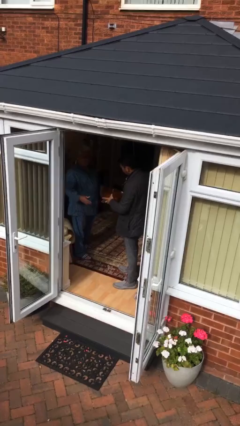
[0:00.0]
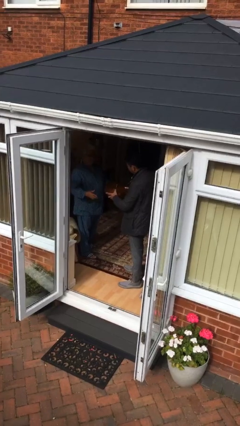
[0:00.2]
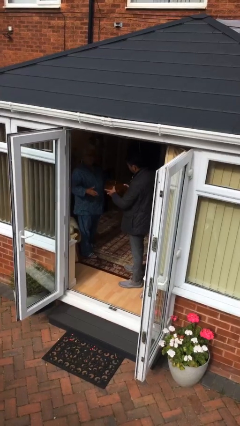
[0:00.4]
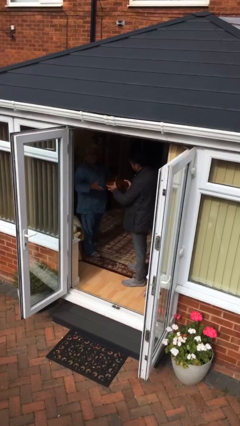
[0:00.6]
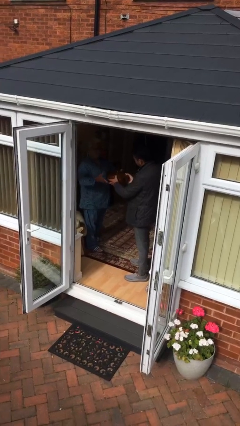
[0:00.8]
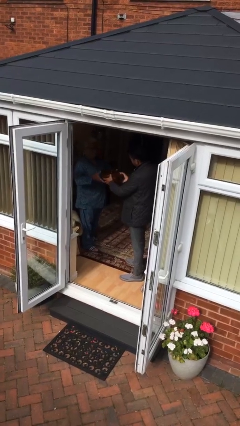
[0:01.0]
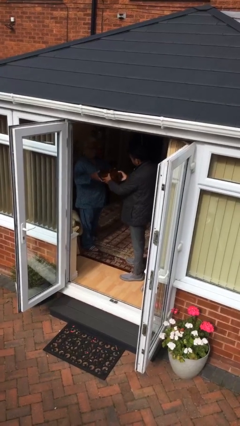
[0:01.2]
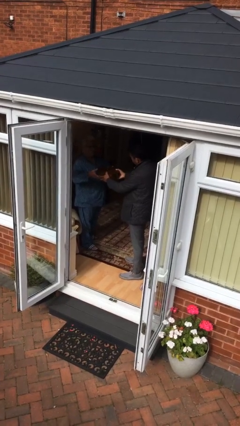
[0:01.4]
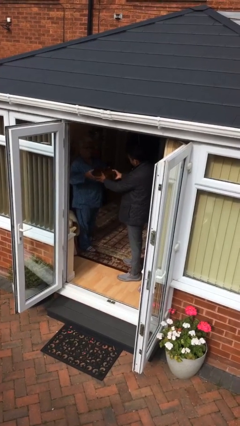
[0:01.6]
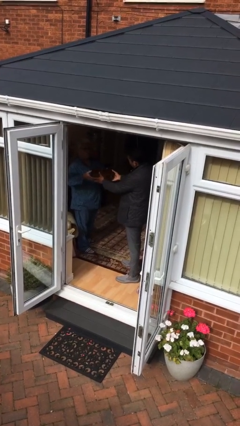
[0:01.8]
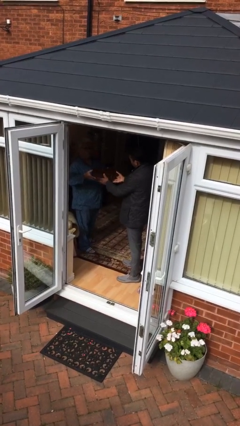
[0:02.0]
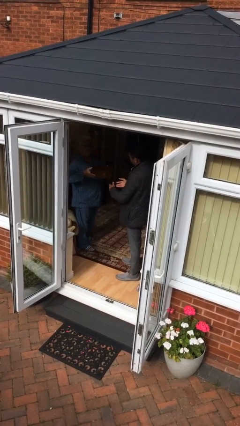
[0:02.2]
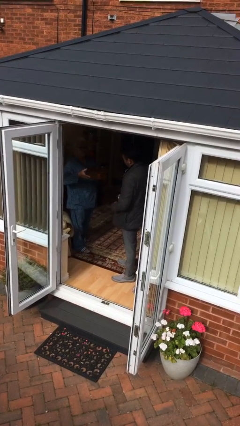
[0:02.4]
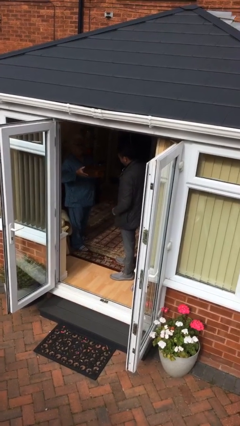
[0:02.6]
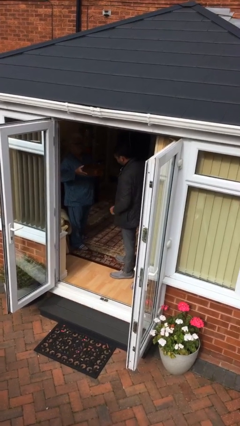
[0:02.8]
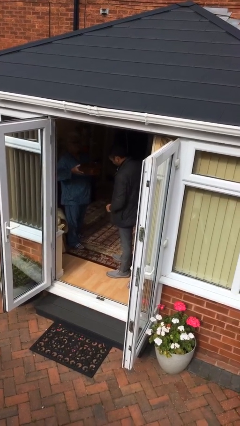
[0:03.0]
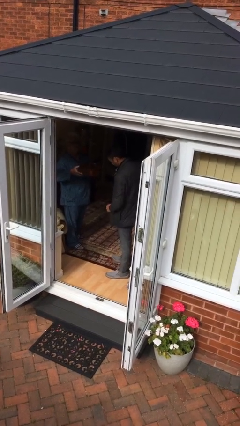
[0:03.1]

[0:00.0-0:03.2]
person transfers object to person

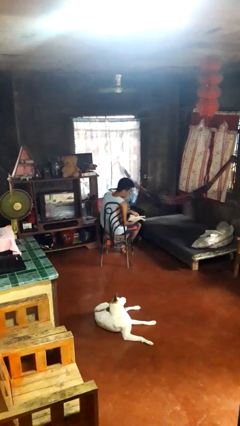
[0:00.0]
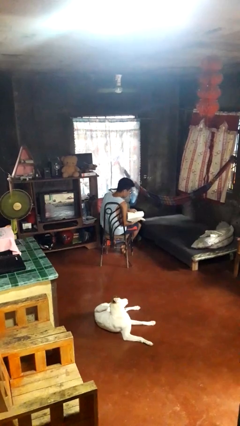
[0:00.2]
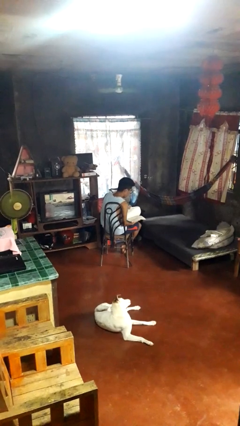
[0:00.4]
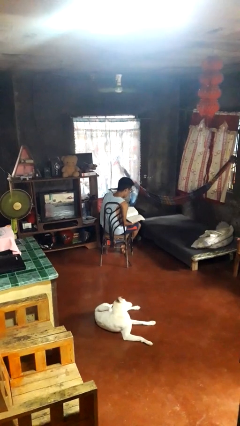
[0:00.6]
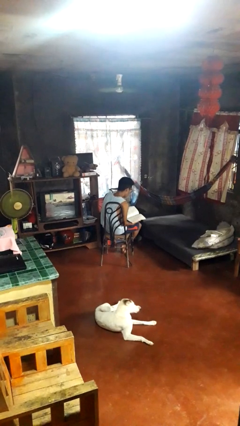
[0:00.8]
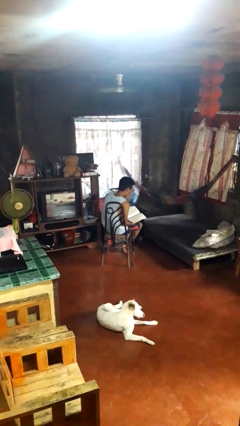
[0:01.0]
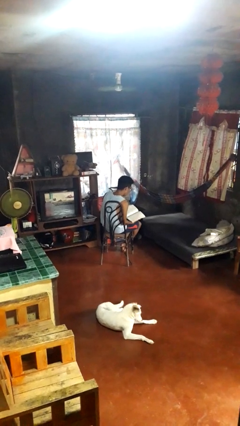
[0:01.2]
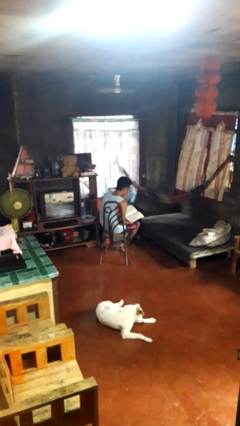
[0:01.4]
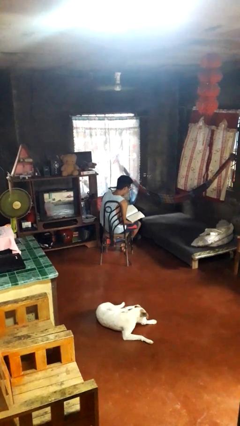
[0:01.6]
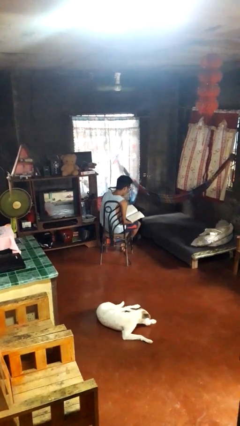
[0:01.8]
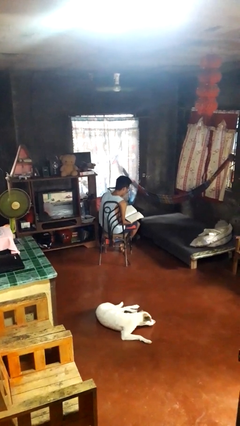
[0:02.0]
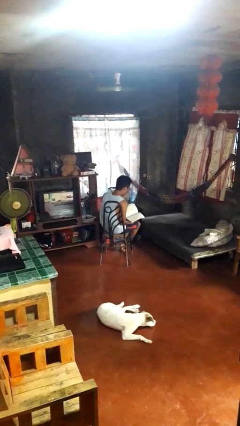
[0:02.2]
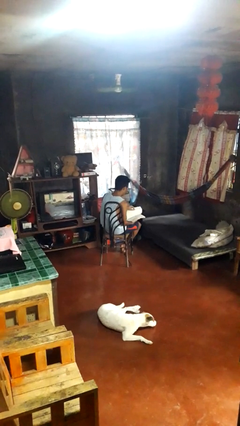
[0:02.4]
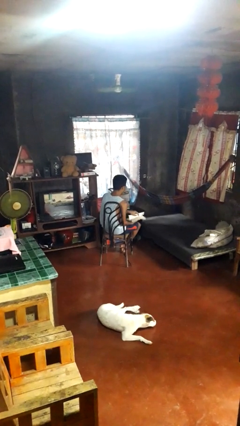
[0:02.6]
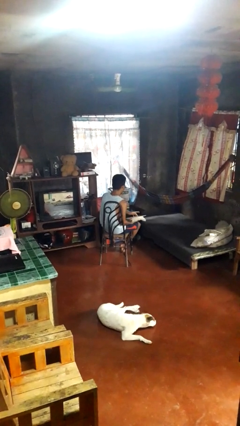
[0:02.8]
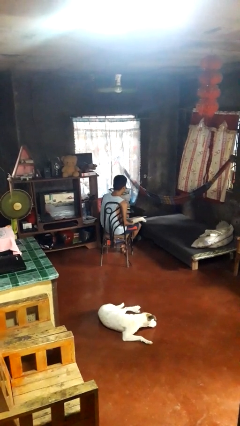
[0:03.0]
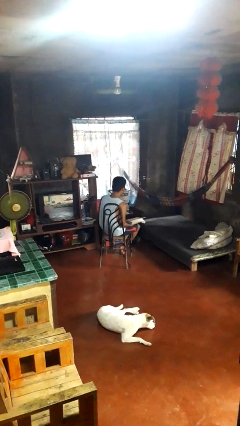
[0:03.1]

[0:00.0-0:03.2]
person reads book

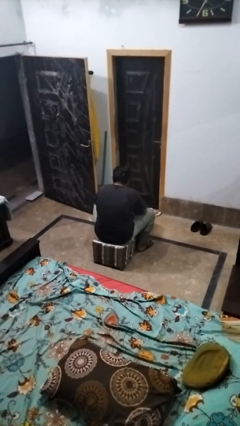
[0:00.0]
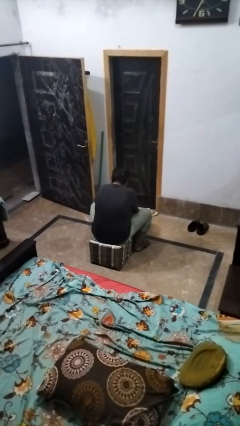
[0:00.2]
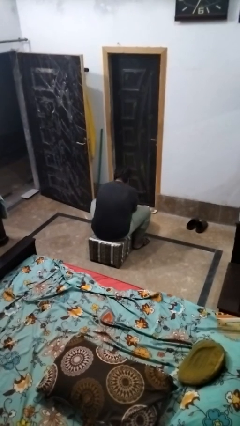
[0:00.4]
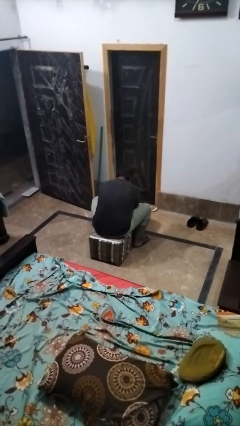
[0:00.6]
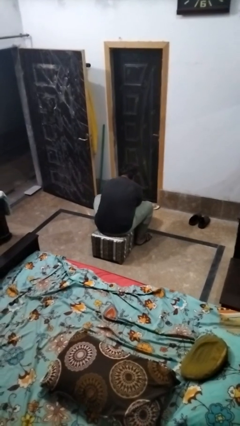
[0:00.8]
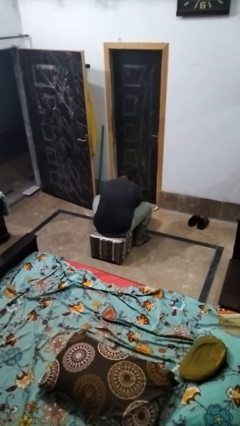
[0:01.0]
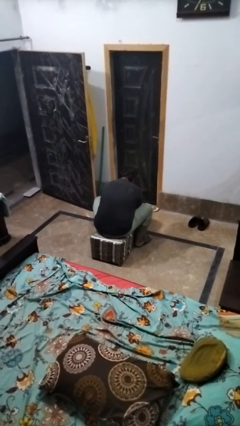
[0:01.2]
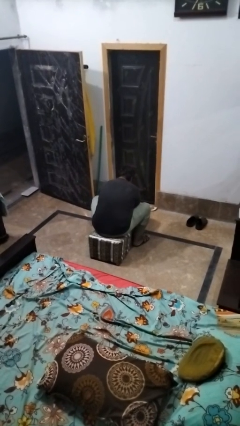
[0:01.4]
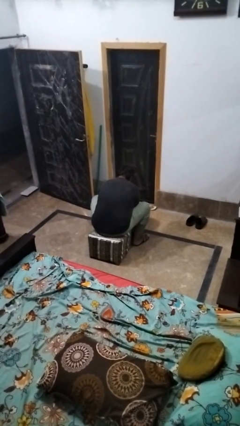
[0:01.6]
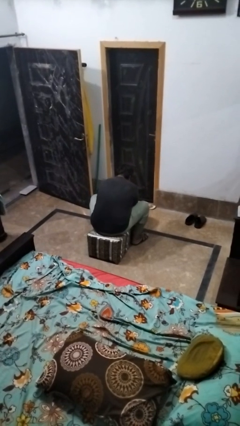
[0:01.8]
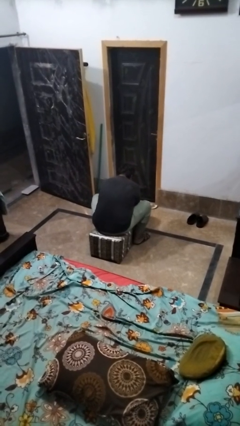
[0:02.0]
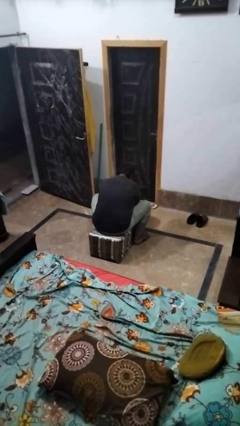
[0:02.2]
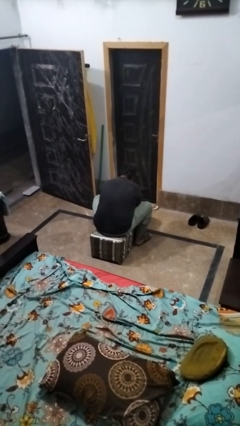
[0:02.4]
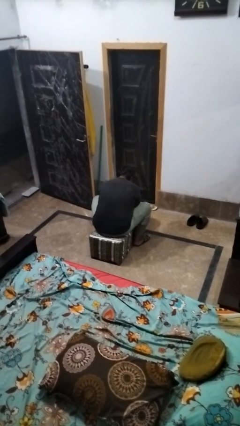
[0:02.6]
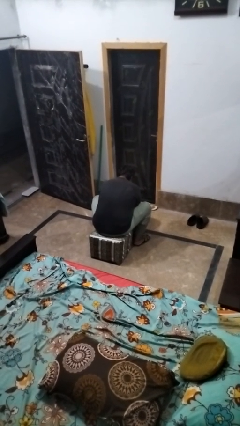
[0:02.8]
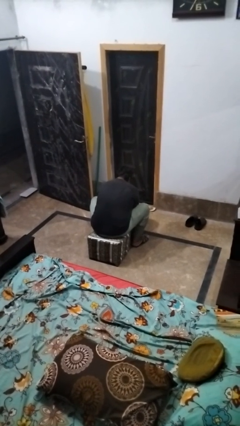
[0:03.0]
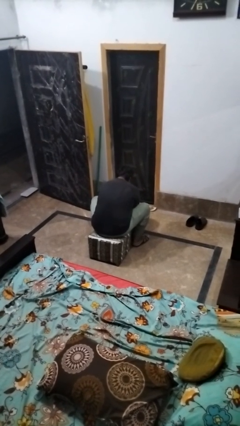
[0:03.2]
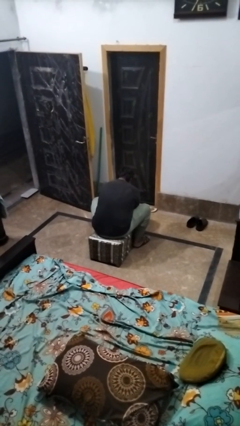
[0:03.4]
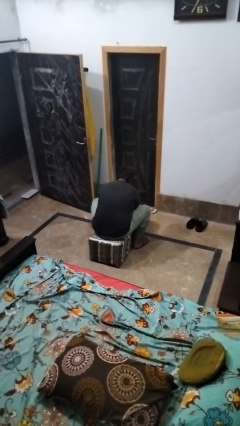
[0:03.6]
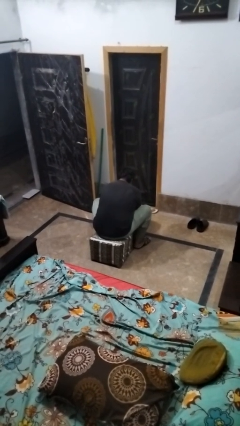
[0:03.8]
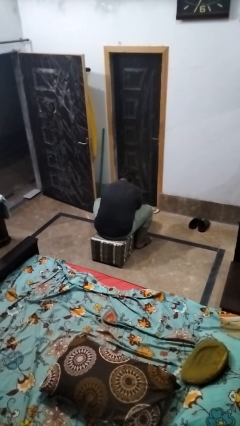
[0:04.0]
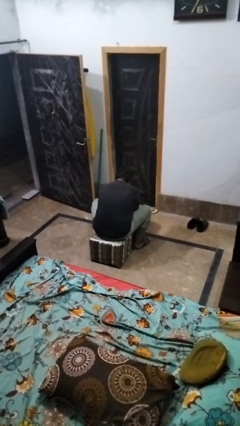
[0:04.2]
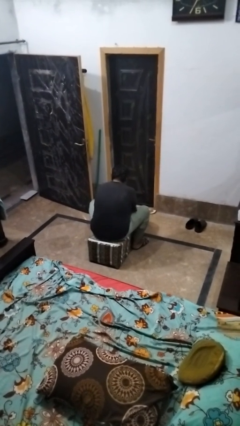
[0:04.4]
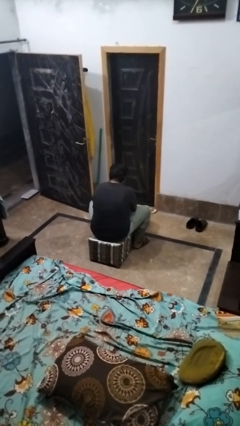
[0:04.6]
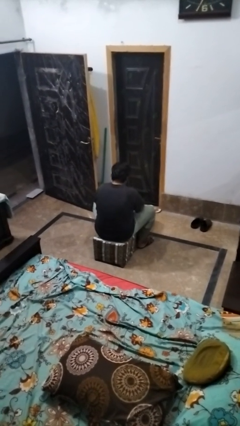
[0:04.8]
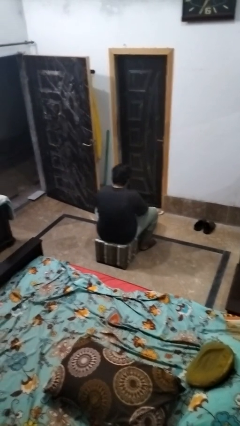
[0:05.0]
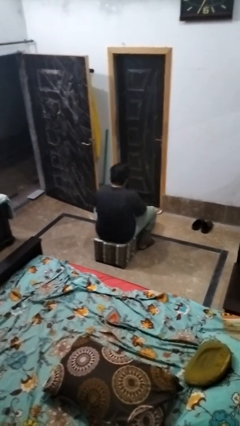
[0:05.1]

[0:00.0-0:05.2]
person searches in box

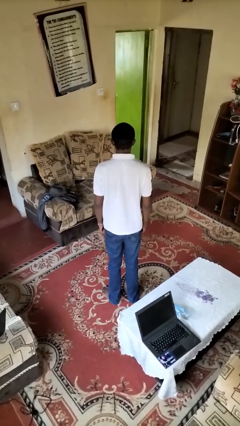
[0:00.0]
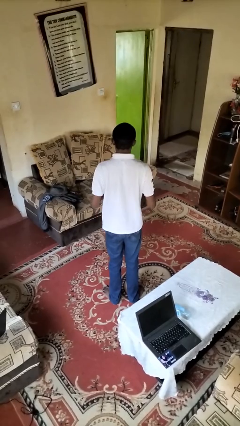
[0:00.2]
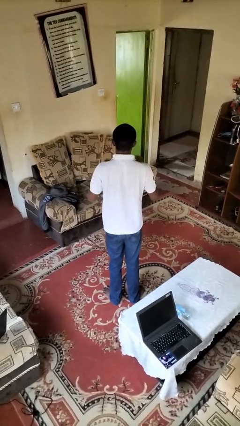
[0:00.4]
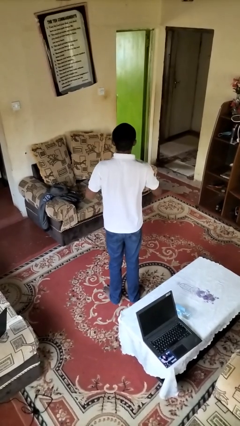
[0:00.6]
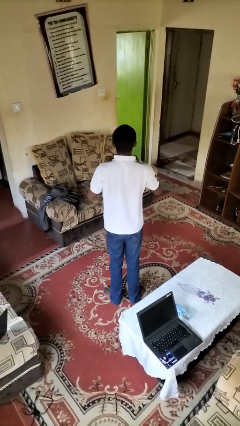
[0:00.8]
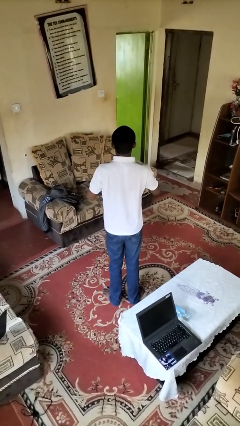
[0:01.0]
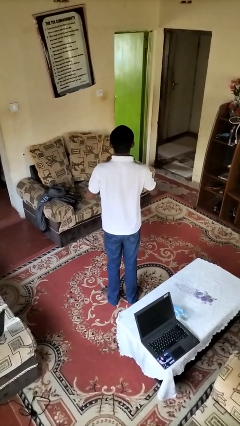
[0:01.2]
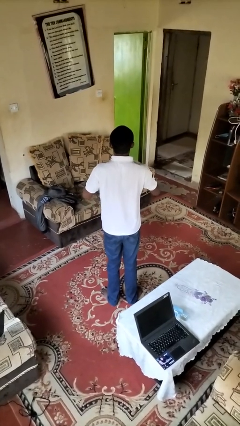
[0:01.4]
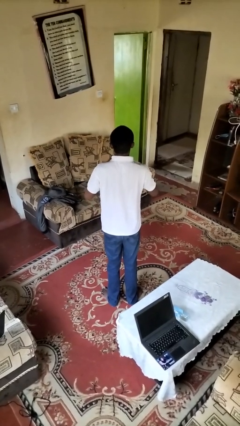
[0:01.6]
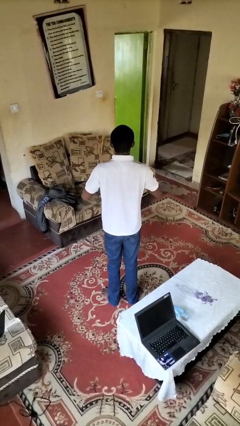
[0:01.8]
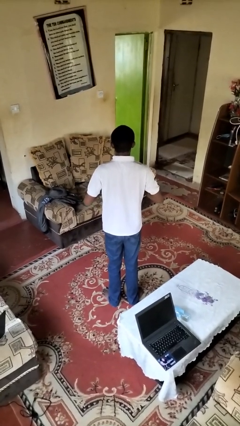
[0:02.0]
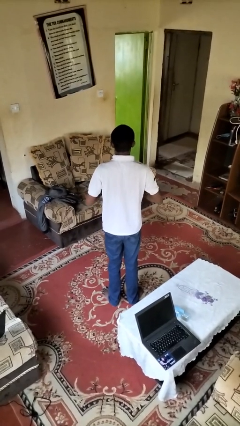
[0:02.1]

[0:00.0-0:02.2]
person drums on chest

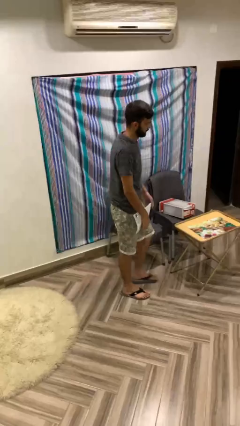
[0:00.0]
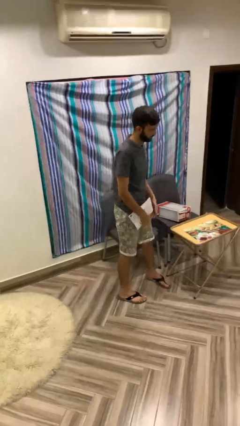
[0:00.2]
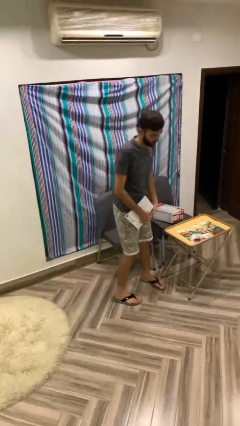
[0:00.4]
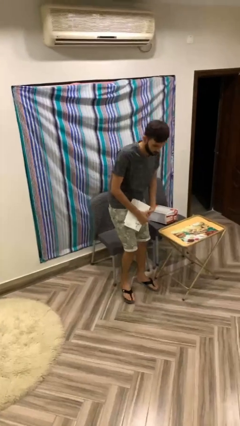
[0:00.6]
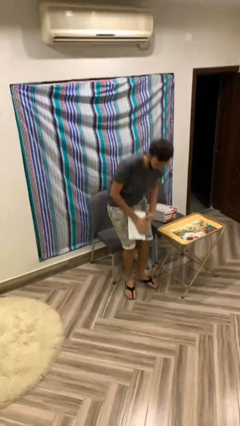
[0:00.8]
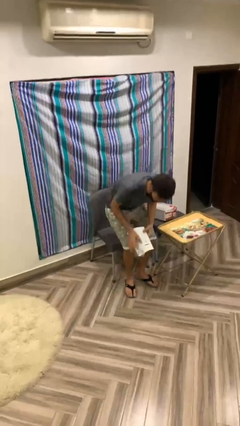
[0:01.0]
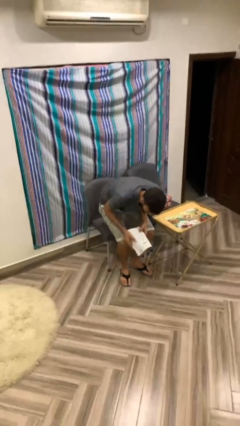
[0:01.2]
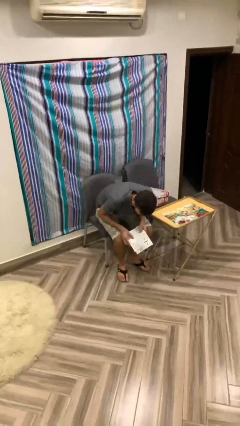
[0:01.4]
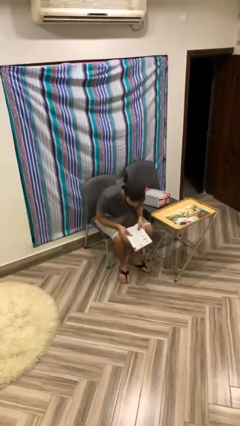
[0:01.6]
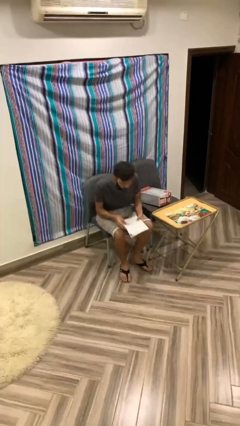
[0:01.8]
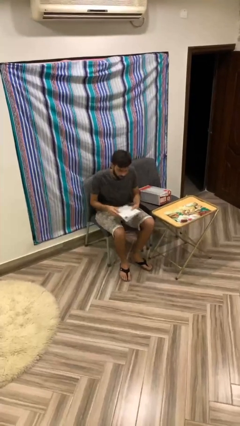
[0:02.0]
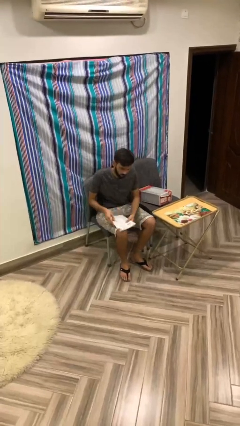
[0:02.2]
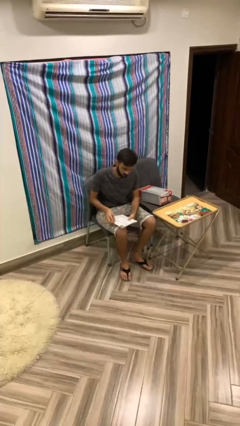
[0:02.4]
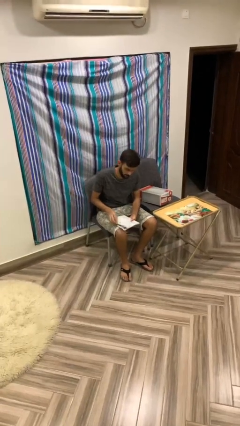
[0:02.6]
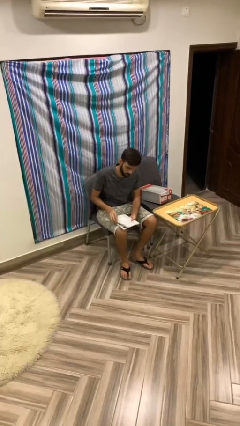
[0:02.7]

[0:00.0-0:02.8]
person sits down

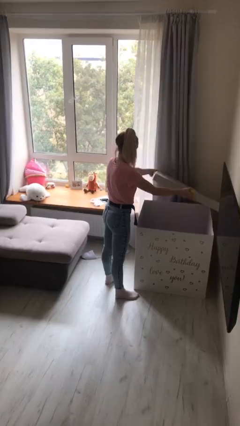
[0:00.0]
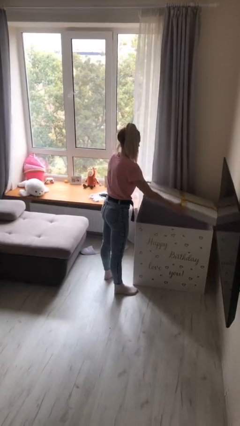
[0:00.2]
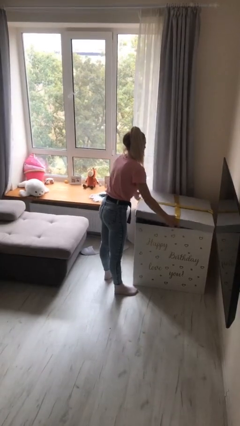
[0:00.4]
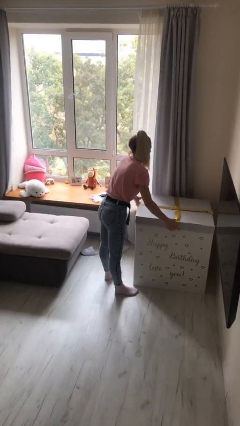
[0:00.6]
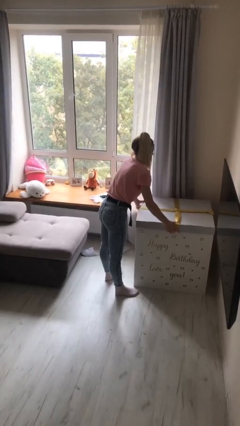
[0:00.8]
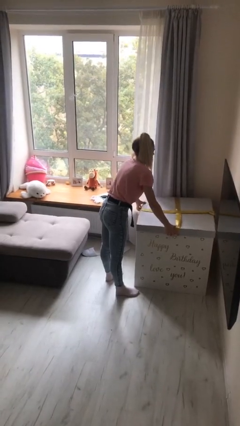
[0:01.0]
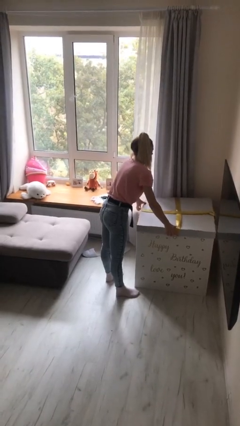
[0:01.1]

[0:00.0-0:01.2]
person closes box
